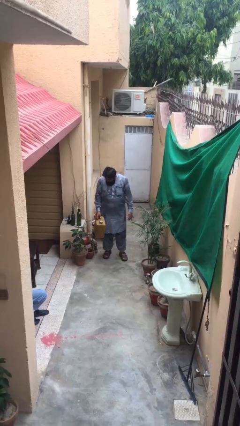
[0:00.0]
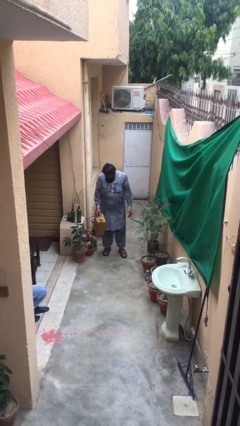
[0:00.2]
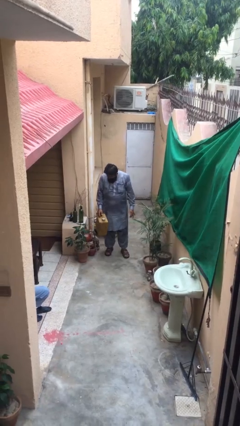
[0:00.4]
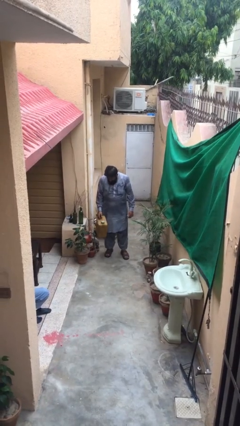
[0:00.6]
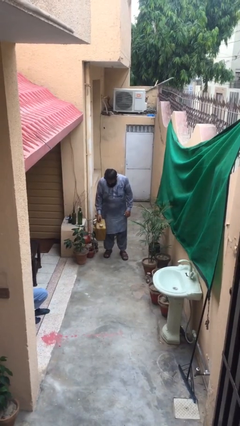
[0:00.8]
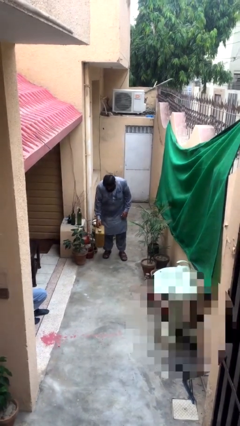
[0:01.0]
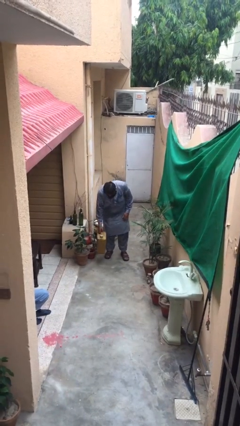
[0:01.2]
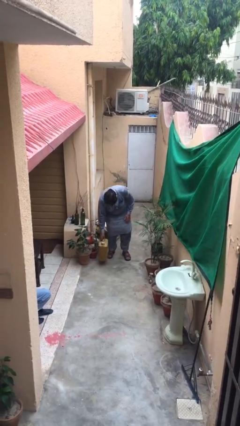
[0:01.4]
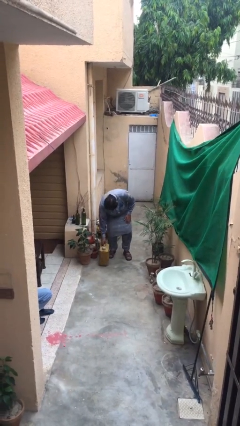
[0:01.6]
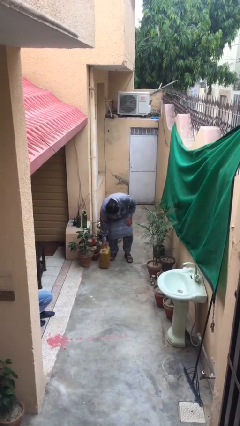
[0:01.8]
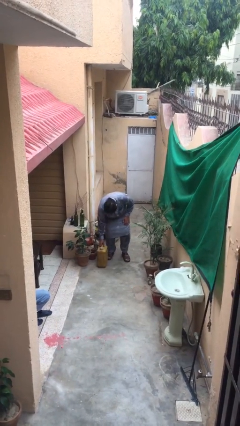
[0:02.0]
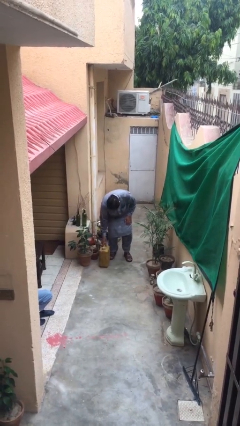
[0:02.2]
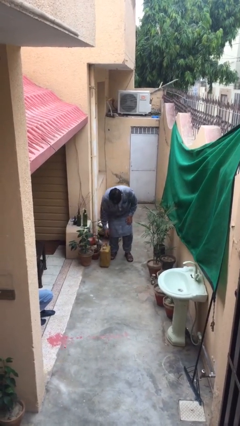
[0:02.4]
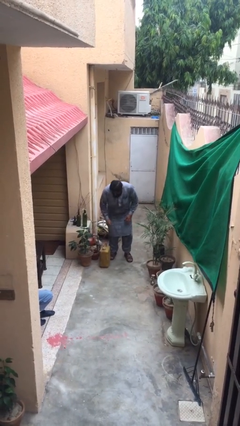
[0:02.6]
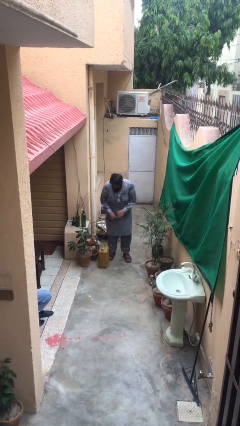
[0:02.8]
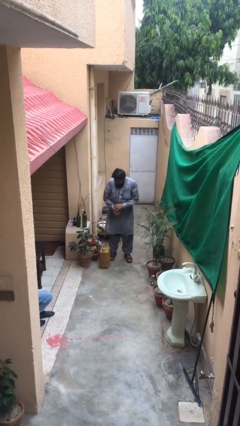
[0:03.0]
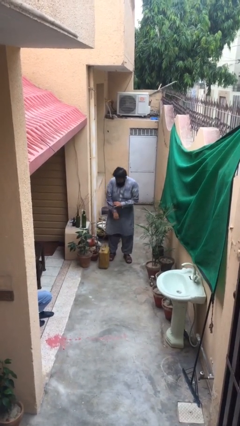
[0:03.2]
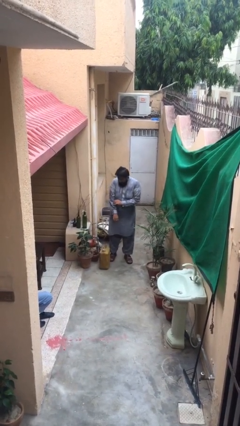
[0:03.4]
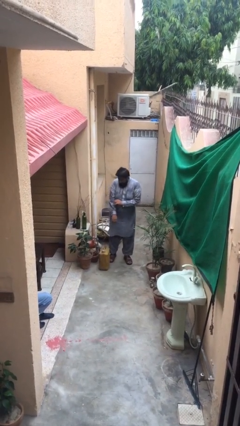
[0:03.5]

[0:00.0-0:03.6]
person puts down object on floor

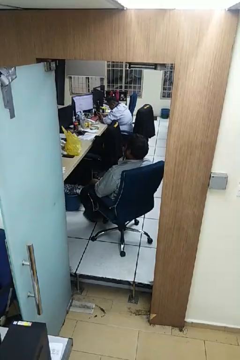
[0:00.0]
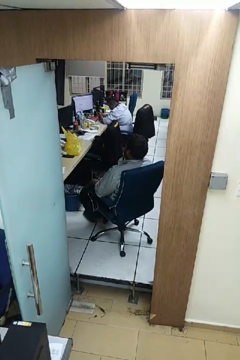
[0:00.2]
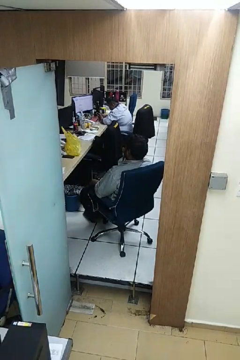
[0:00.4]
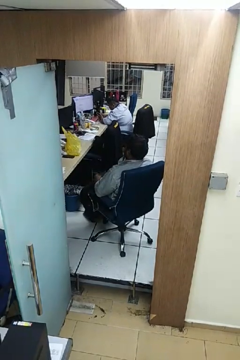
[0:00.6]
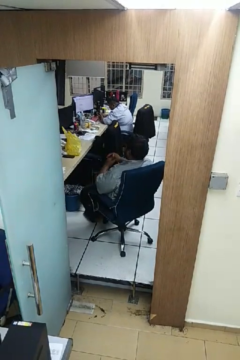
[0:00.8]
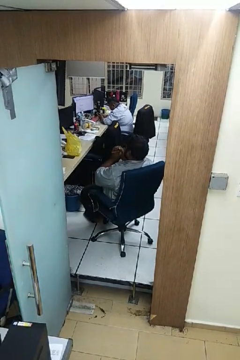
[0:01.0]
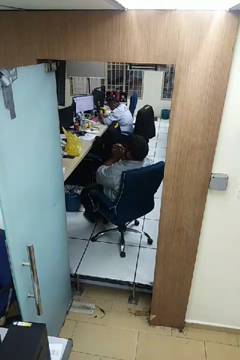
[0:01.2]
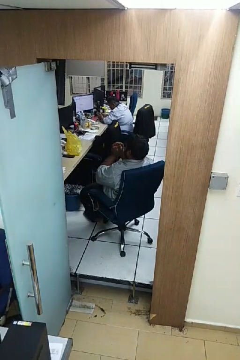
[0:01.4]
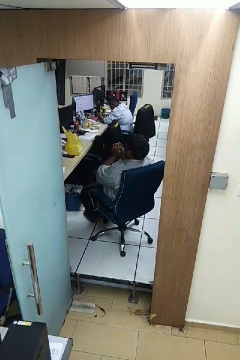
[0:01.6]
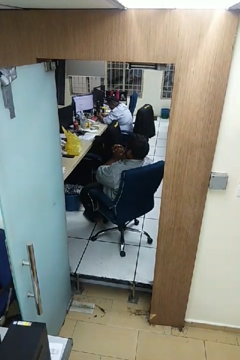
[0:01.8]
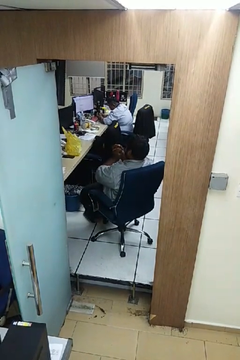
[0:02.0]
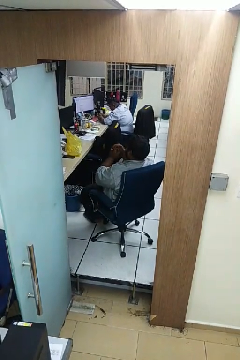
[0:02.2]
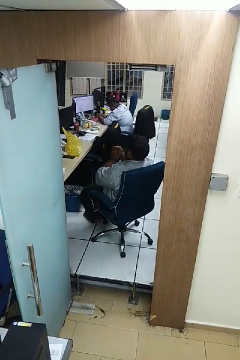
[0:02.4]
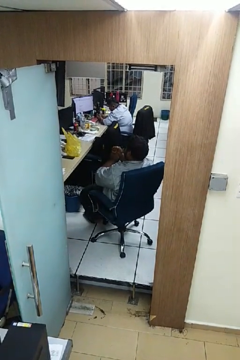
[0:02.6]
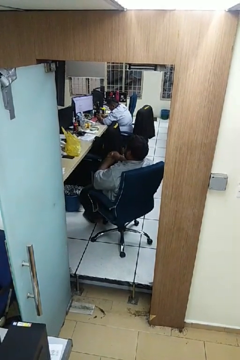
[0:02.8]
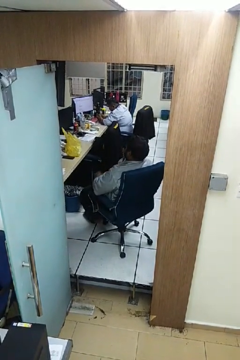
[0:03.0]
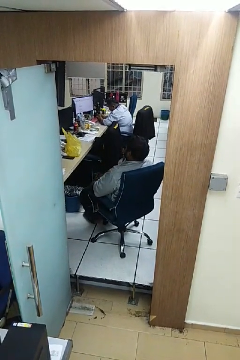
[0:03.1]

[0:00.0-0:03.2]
person cracks knuckles

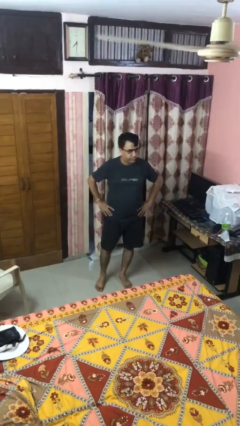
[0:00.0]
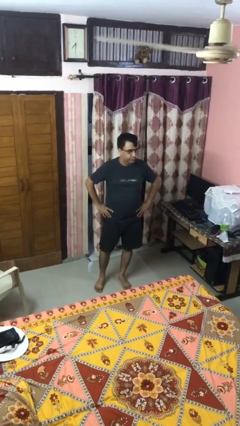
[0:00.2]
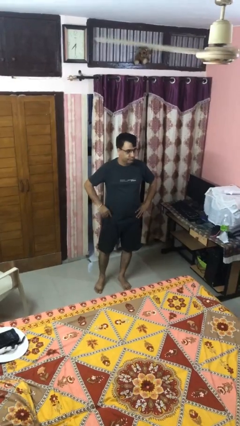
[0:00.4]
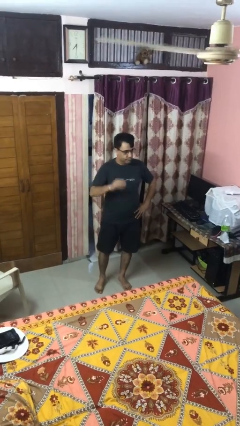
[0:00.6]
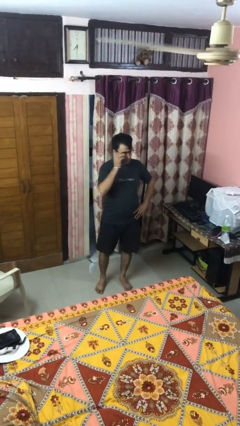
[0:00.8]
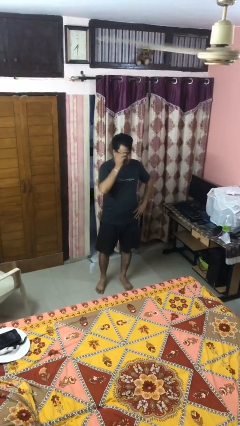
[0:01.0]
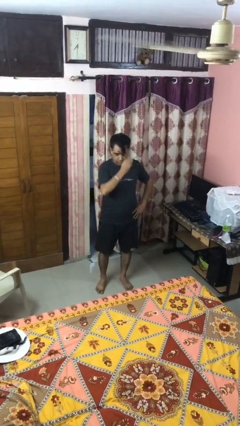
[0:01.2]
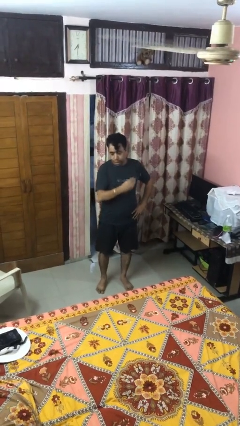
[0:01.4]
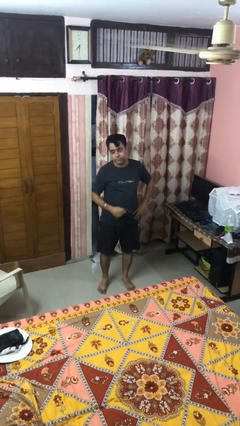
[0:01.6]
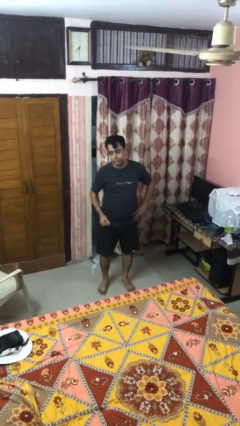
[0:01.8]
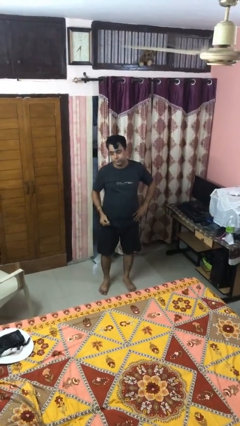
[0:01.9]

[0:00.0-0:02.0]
person takes off glasses

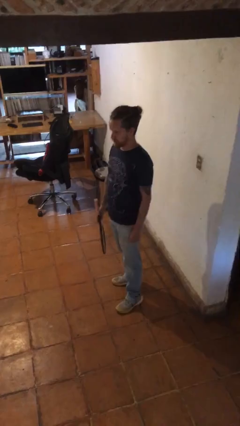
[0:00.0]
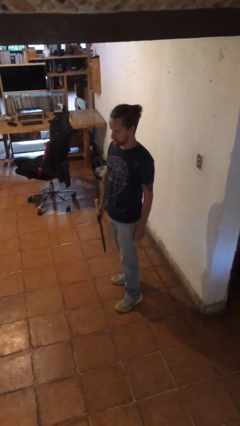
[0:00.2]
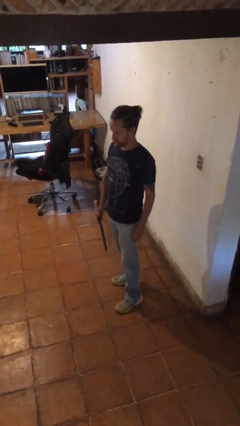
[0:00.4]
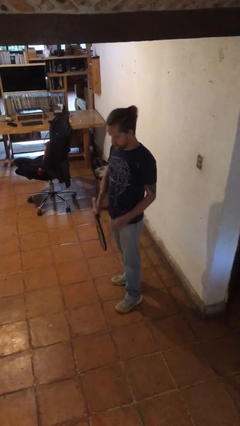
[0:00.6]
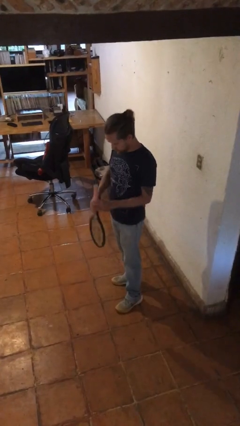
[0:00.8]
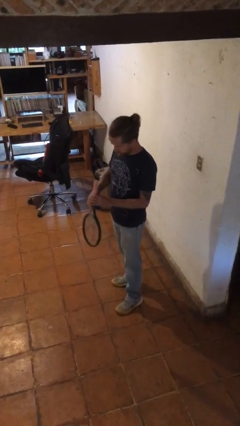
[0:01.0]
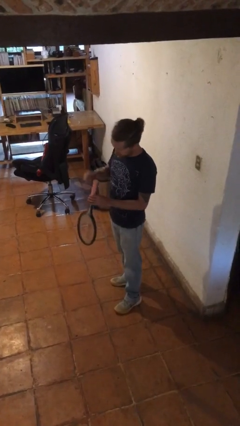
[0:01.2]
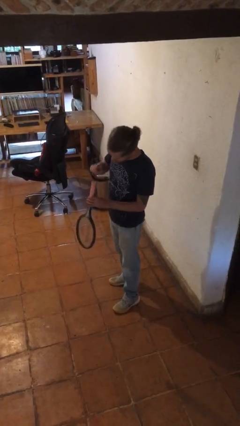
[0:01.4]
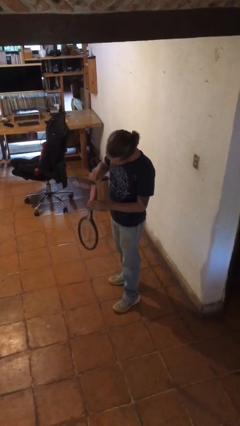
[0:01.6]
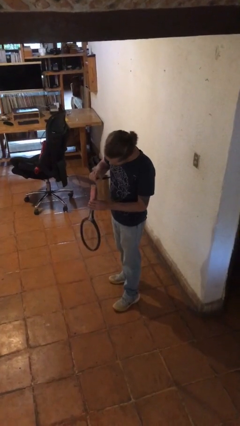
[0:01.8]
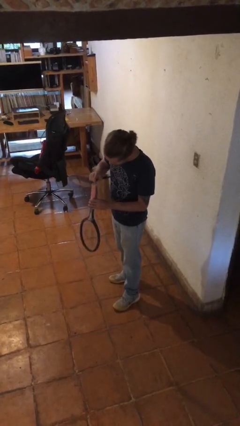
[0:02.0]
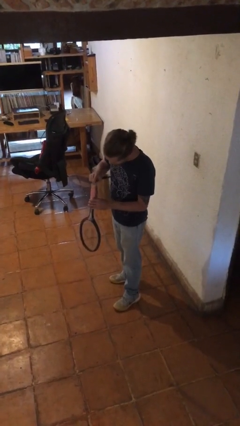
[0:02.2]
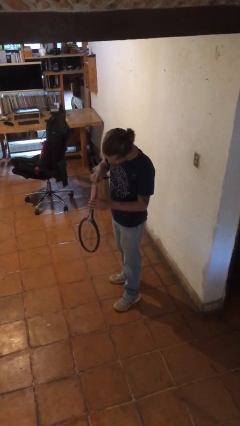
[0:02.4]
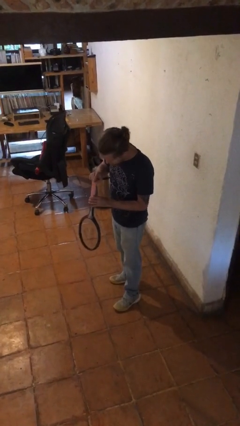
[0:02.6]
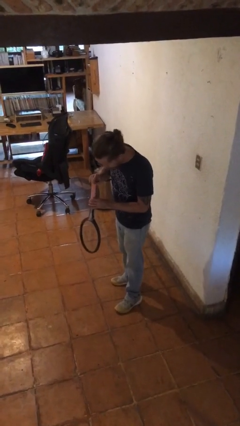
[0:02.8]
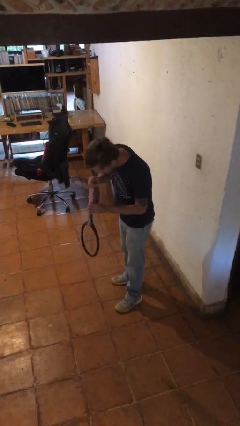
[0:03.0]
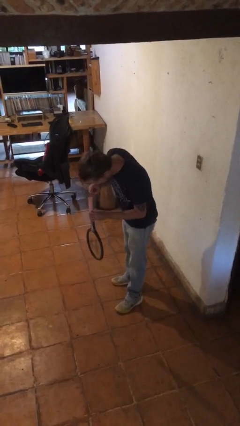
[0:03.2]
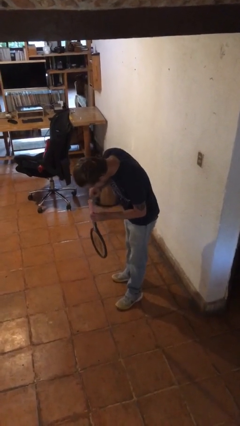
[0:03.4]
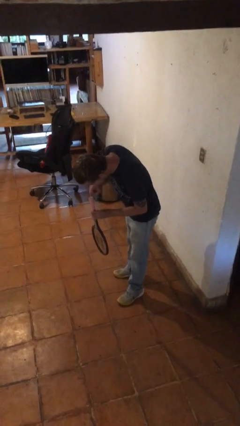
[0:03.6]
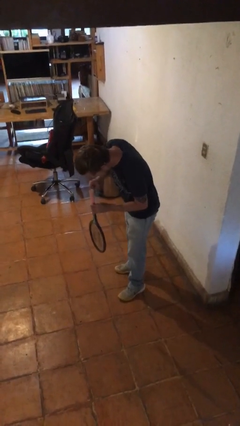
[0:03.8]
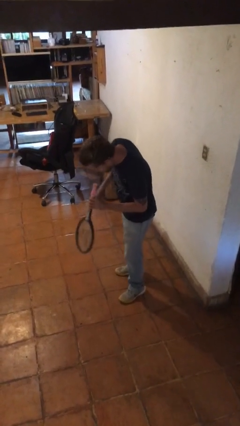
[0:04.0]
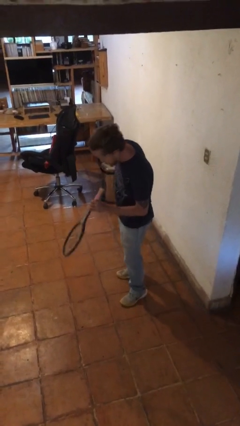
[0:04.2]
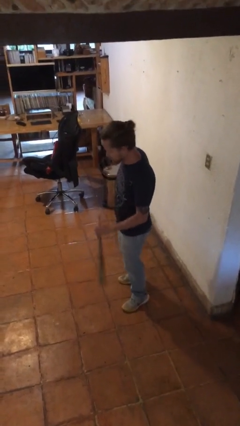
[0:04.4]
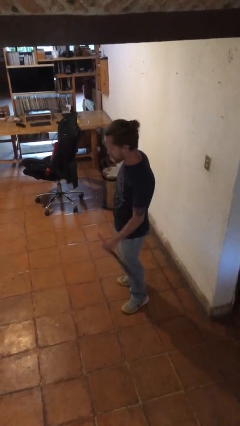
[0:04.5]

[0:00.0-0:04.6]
person taps object with finger

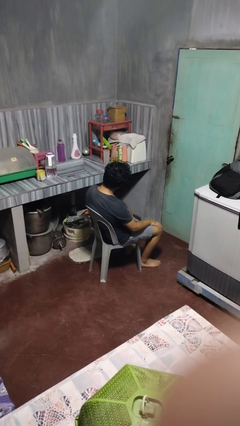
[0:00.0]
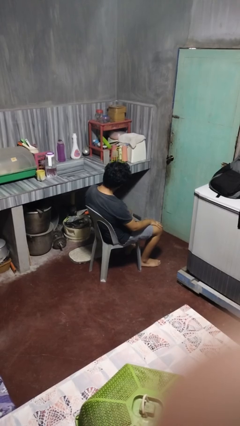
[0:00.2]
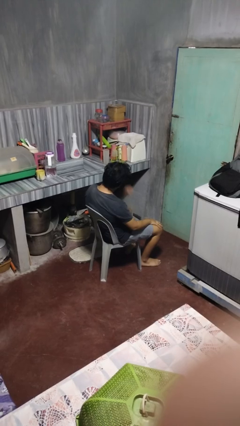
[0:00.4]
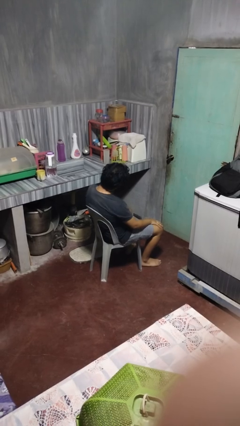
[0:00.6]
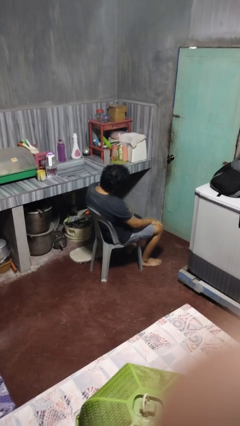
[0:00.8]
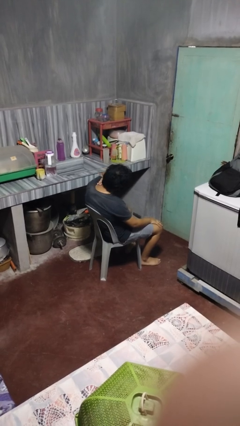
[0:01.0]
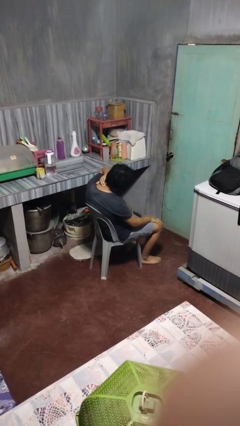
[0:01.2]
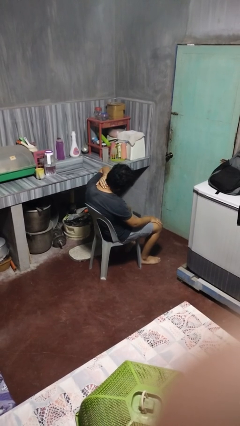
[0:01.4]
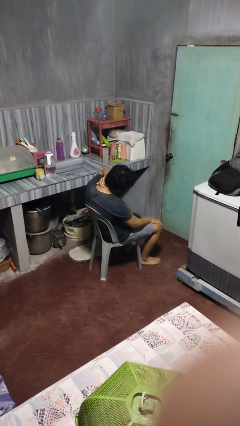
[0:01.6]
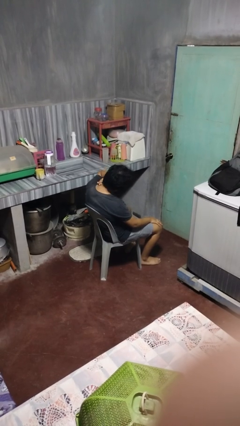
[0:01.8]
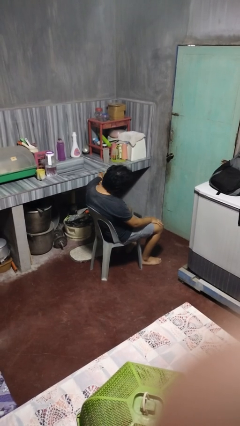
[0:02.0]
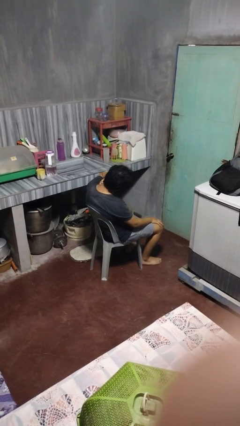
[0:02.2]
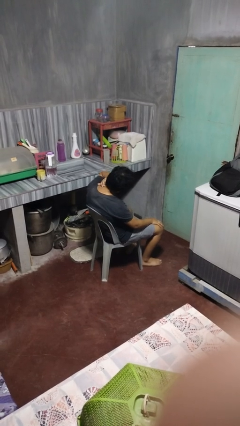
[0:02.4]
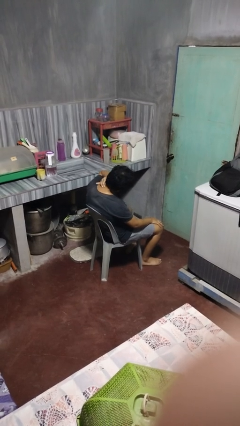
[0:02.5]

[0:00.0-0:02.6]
person rubs neck

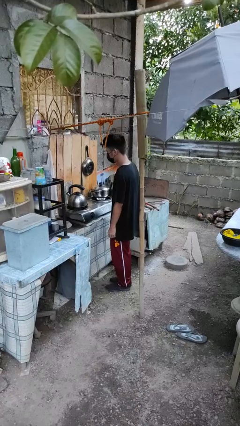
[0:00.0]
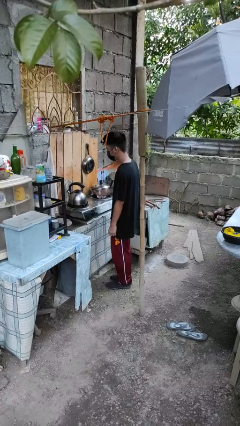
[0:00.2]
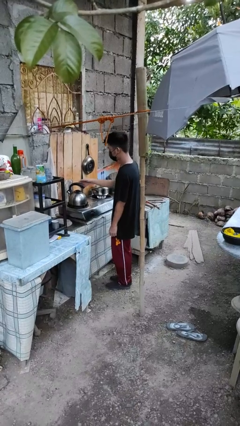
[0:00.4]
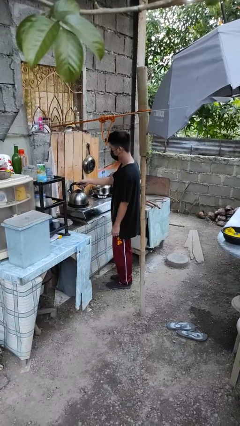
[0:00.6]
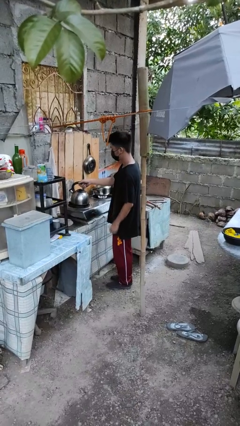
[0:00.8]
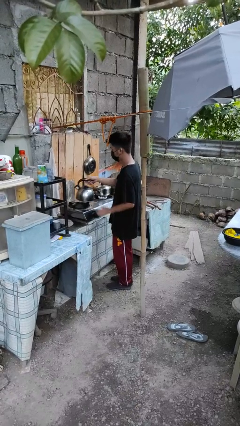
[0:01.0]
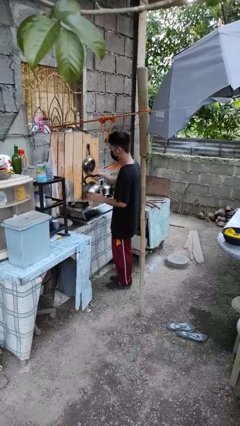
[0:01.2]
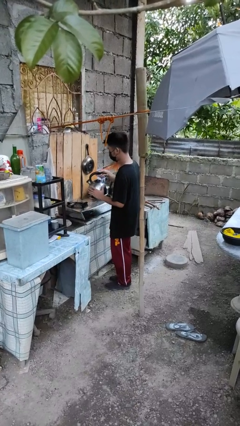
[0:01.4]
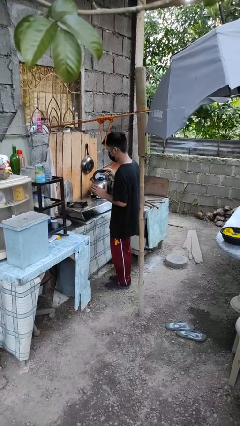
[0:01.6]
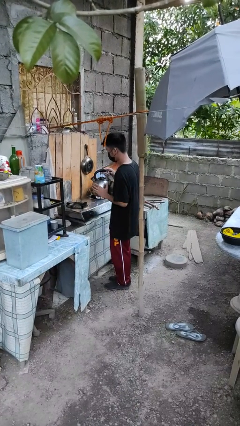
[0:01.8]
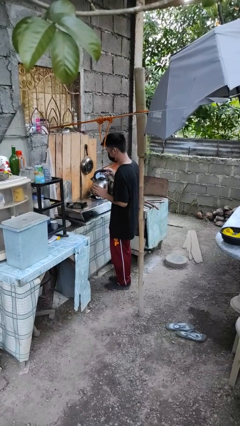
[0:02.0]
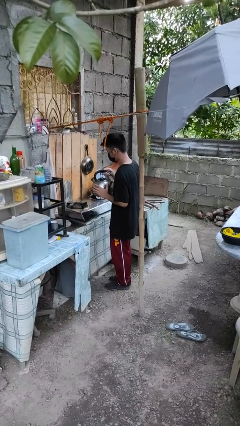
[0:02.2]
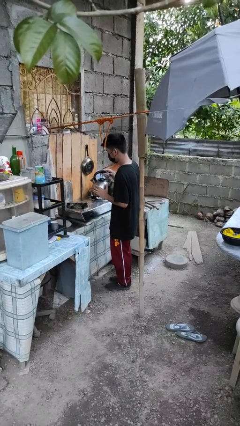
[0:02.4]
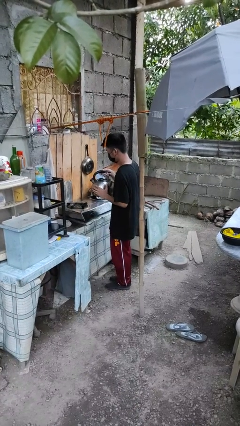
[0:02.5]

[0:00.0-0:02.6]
person picks up object from countertop
